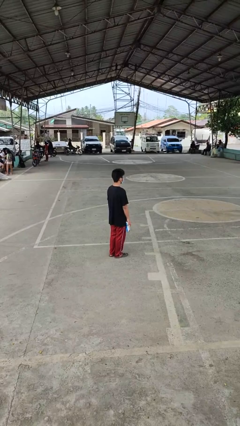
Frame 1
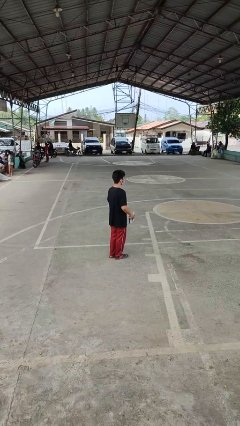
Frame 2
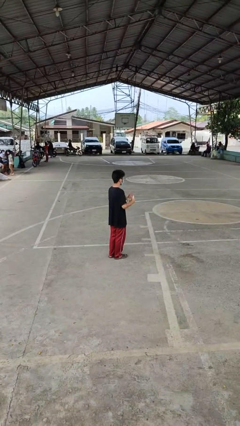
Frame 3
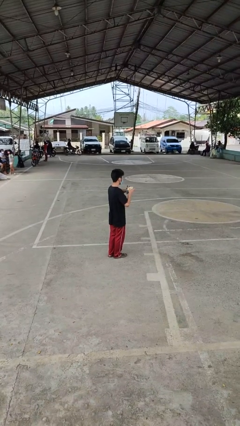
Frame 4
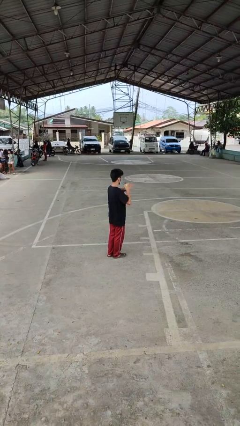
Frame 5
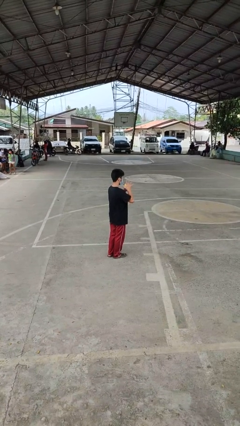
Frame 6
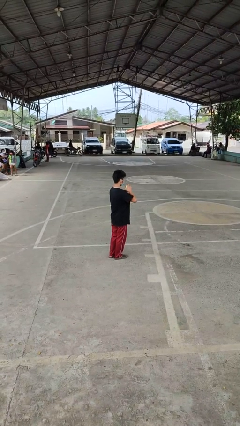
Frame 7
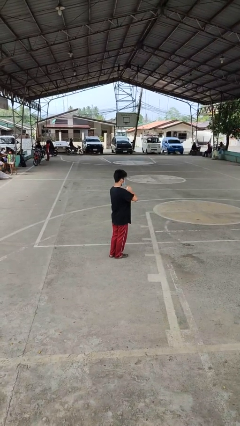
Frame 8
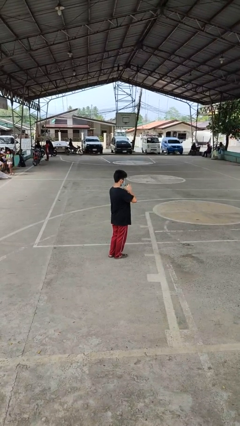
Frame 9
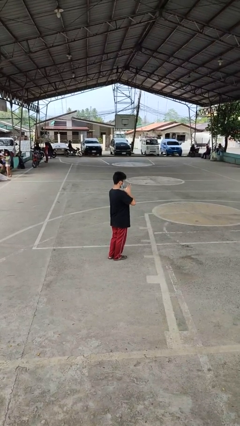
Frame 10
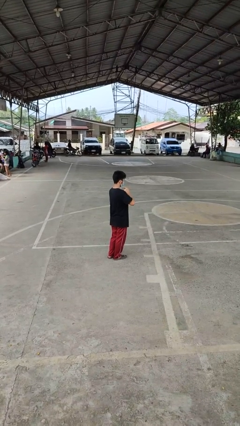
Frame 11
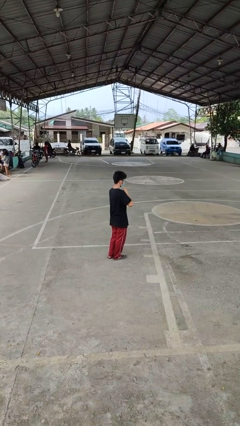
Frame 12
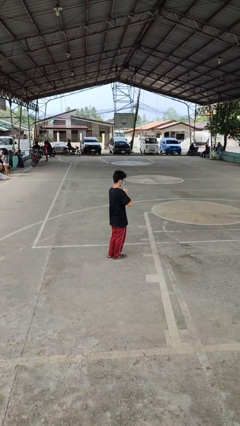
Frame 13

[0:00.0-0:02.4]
person squeezes object

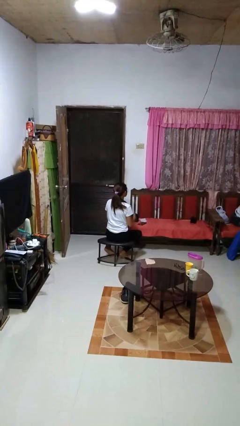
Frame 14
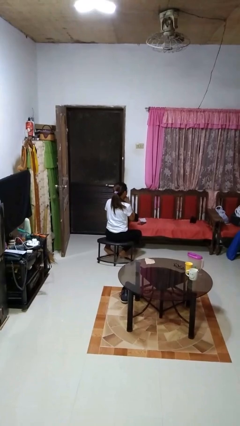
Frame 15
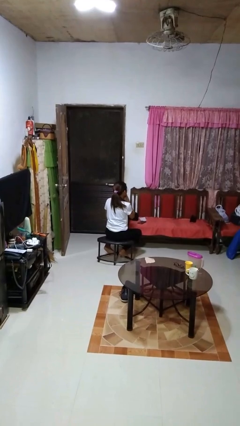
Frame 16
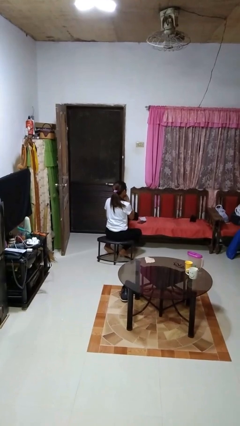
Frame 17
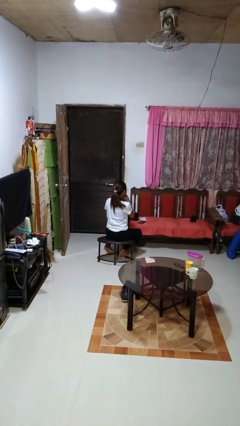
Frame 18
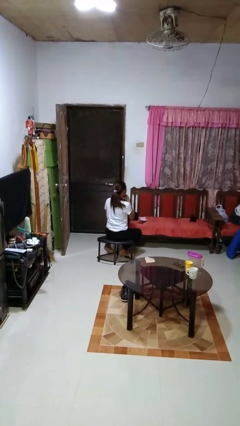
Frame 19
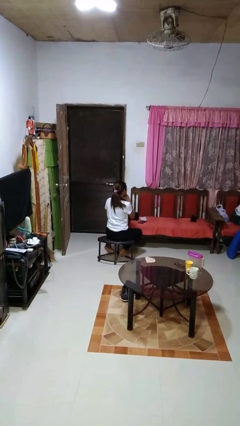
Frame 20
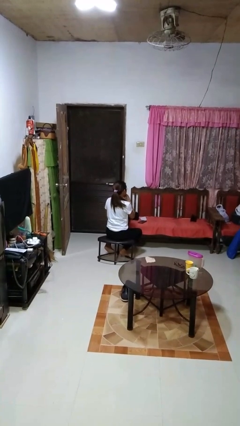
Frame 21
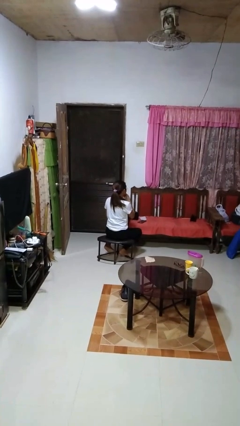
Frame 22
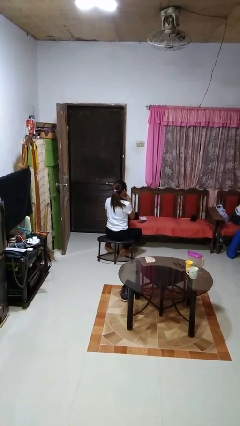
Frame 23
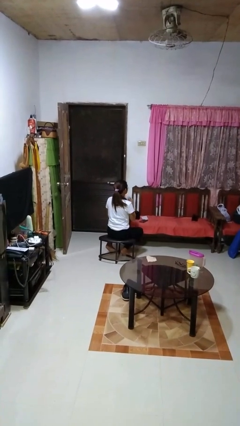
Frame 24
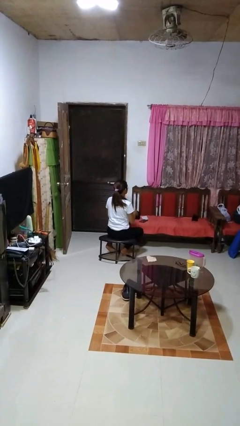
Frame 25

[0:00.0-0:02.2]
person strokes chin

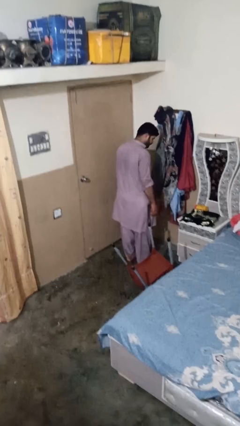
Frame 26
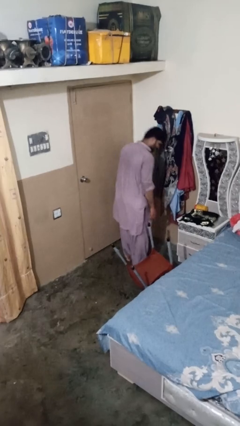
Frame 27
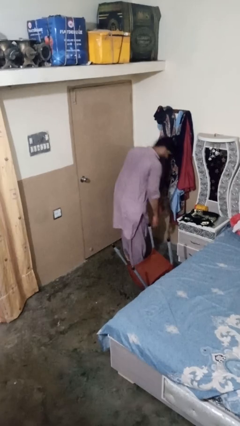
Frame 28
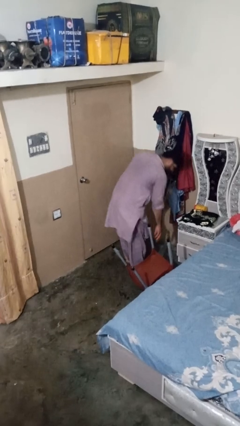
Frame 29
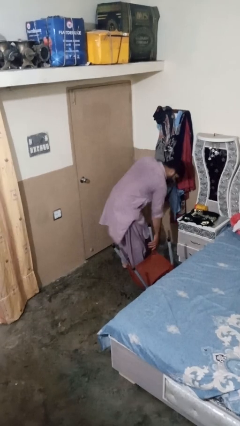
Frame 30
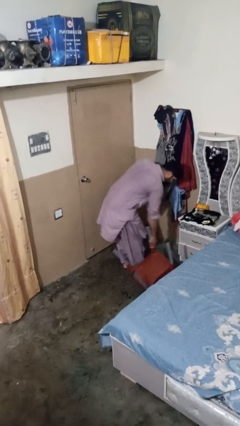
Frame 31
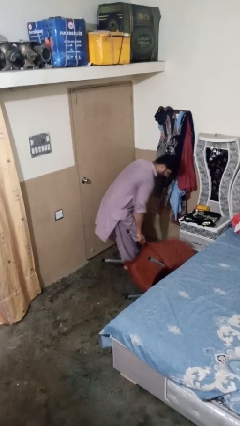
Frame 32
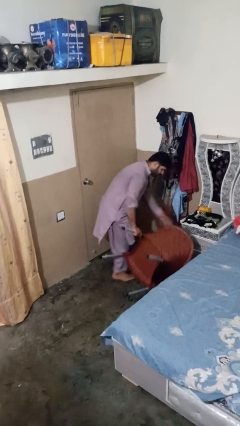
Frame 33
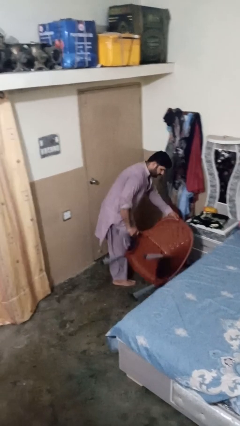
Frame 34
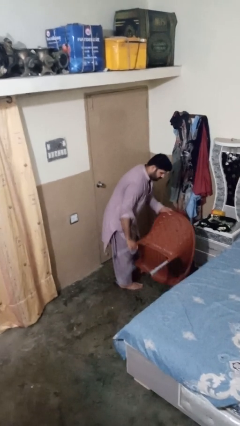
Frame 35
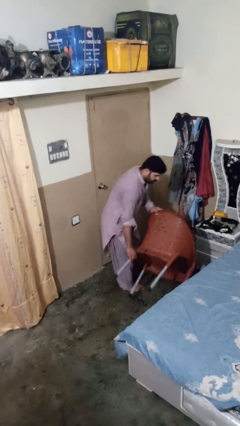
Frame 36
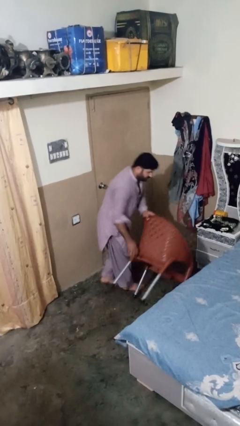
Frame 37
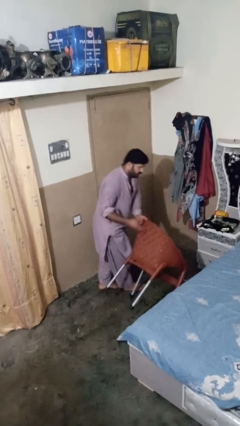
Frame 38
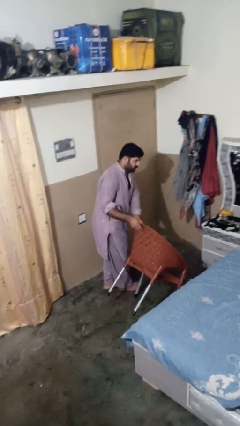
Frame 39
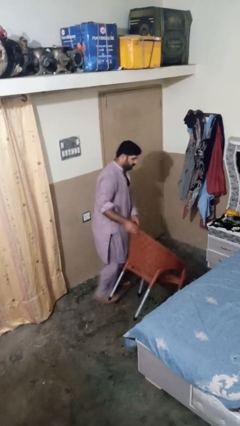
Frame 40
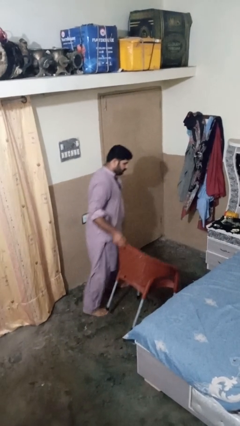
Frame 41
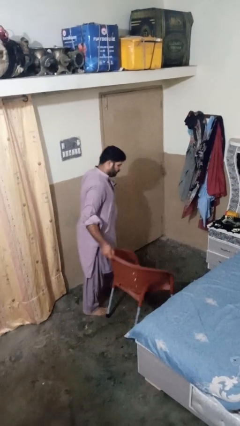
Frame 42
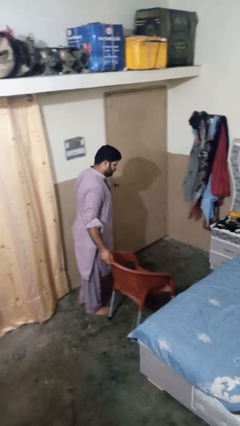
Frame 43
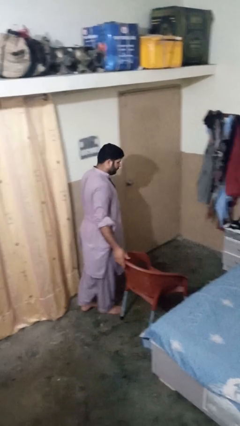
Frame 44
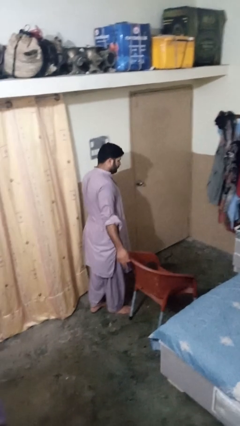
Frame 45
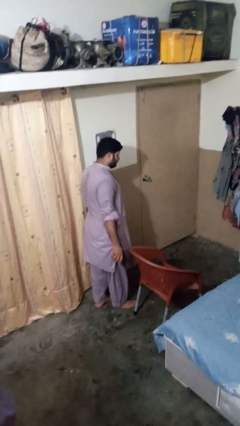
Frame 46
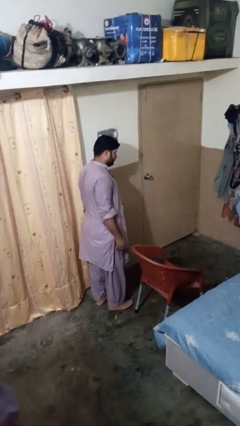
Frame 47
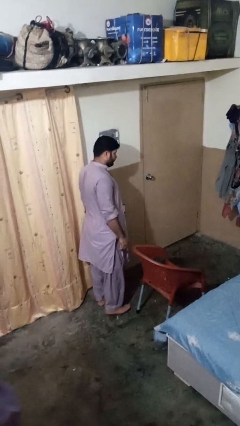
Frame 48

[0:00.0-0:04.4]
person sets upright furniture

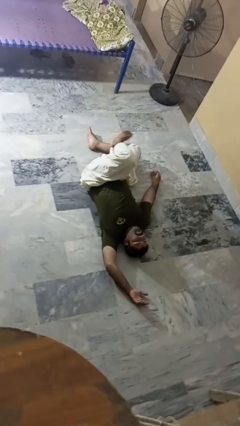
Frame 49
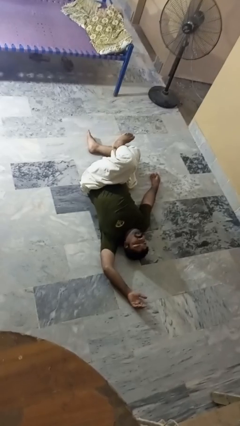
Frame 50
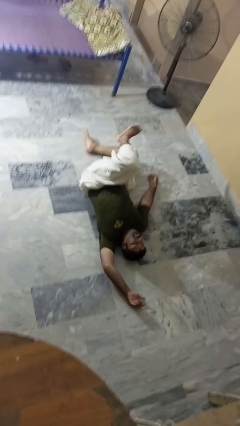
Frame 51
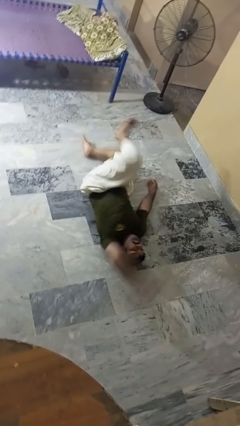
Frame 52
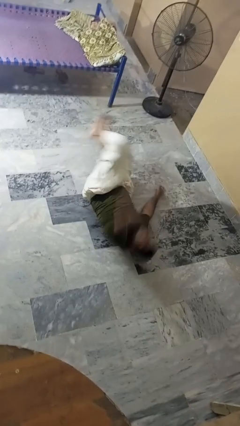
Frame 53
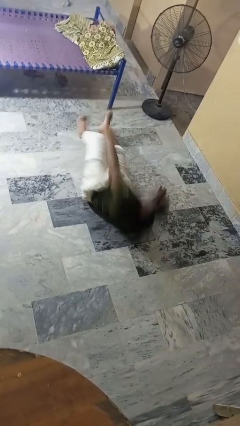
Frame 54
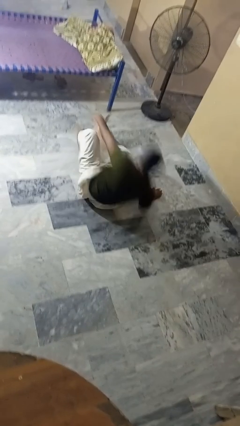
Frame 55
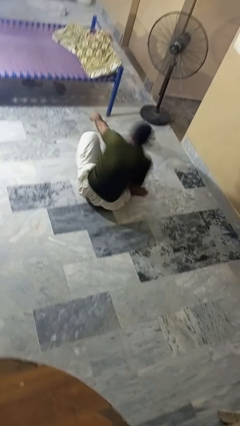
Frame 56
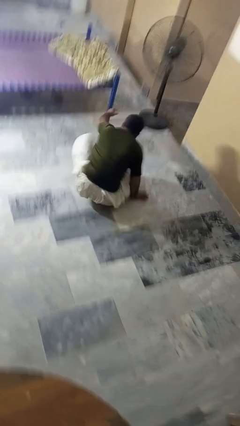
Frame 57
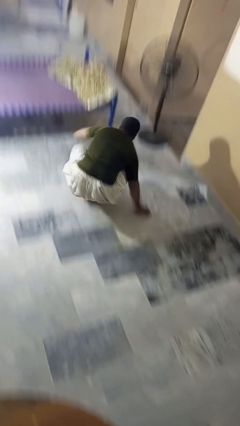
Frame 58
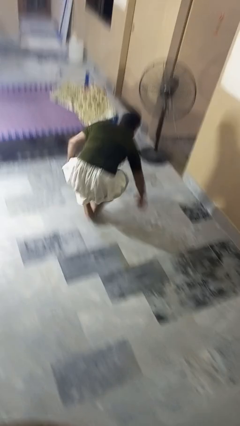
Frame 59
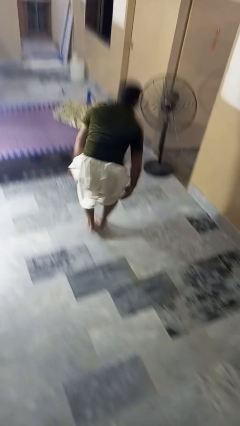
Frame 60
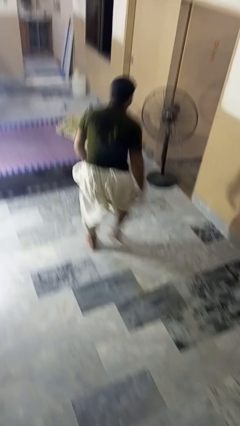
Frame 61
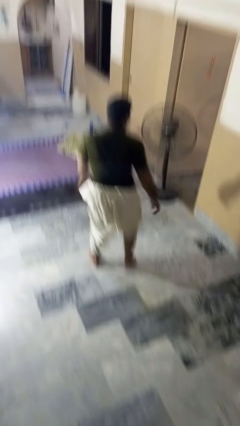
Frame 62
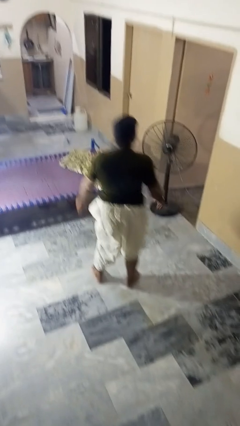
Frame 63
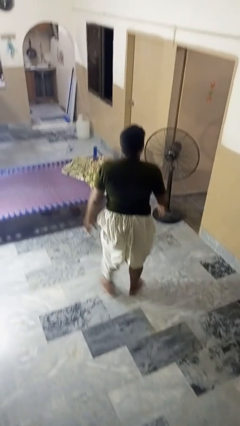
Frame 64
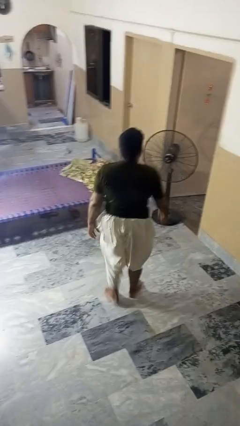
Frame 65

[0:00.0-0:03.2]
person stands up from floor

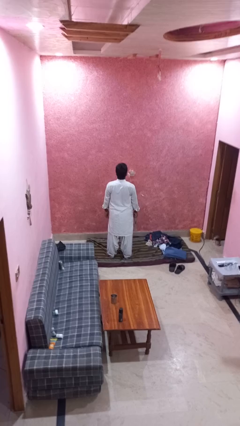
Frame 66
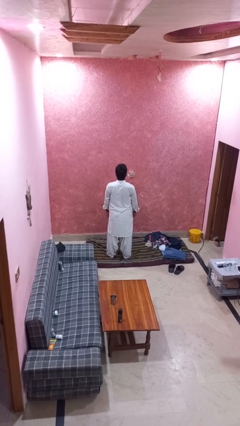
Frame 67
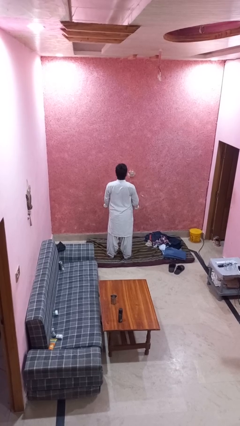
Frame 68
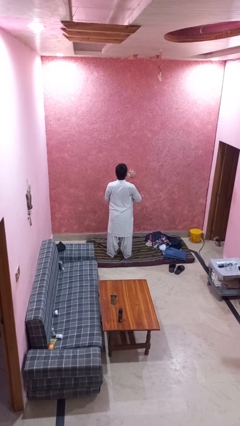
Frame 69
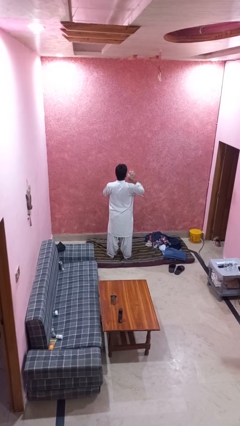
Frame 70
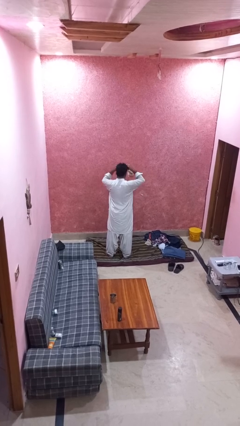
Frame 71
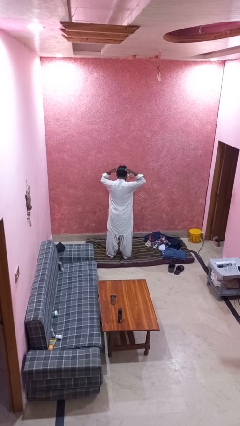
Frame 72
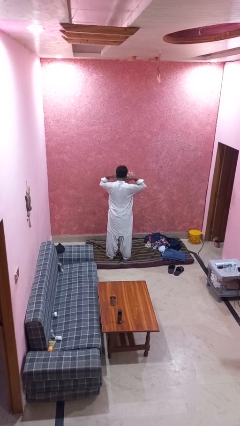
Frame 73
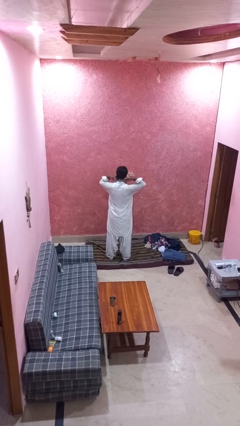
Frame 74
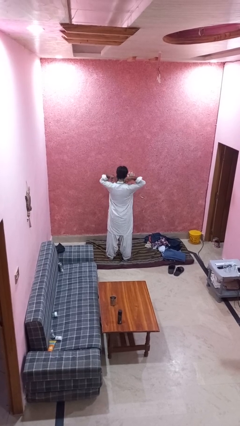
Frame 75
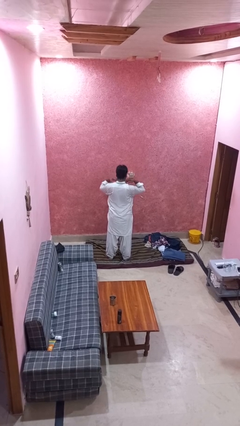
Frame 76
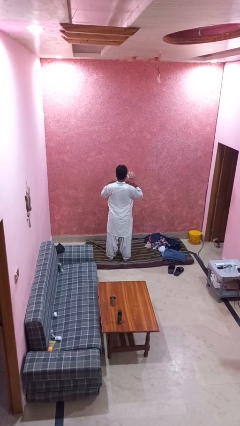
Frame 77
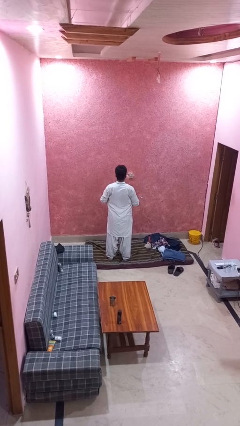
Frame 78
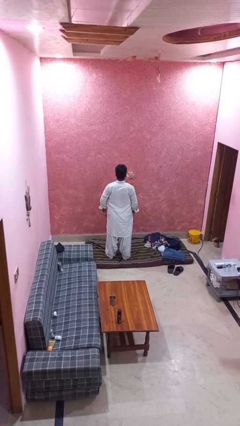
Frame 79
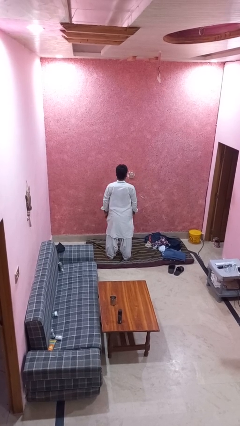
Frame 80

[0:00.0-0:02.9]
person puts on necklace

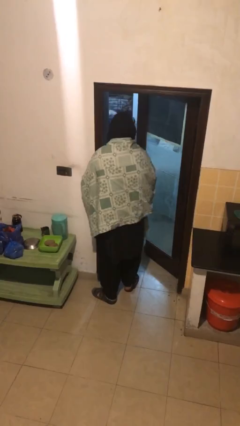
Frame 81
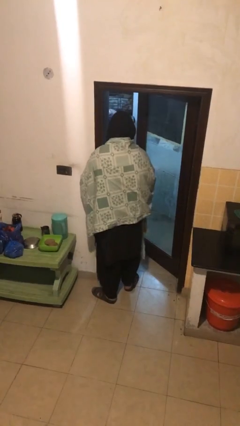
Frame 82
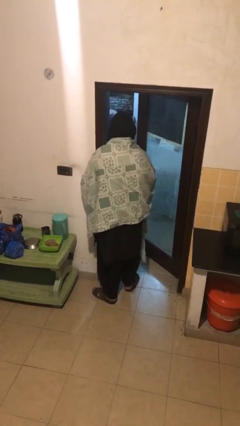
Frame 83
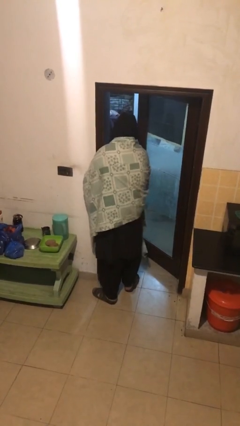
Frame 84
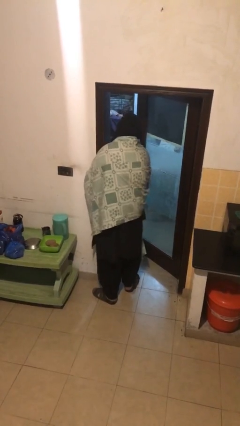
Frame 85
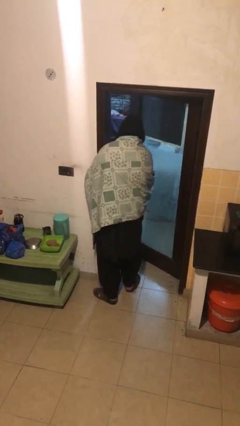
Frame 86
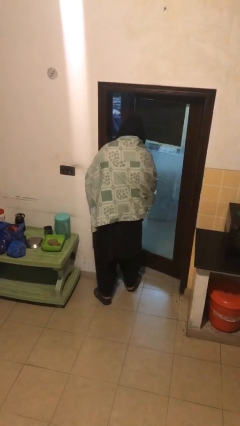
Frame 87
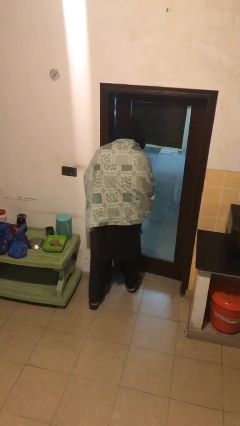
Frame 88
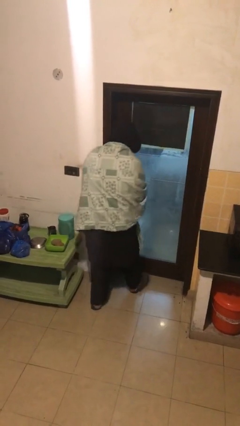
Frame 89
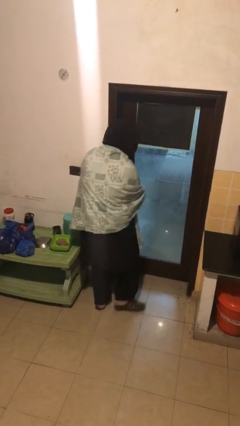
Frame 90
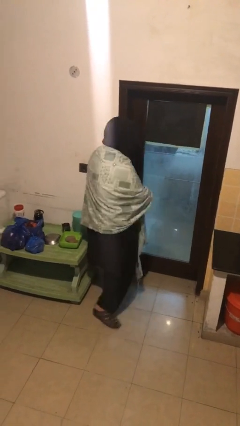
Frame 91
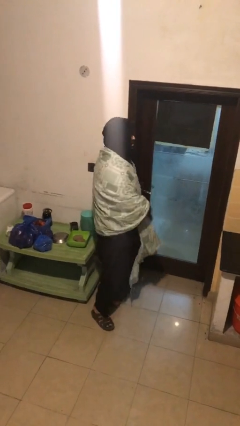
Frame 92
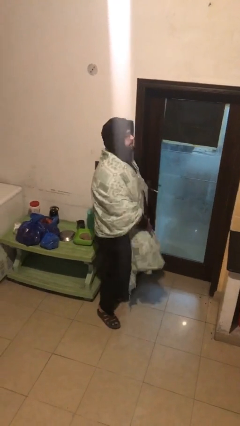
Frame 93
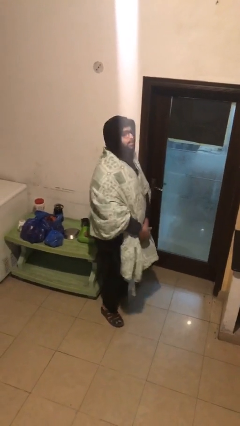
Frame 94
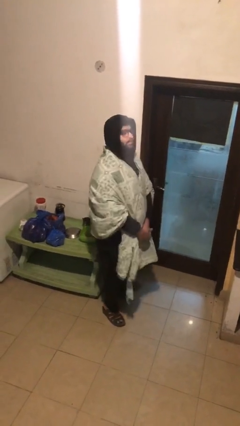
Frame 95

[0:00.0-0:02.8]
person closes facility door
